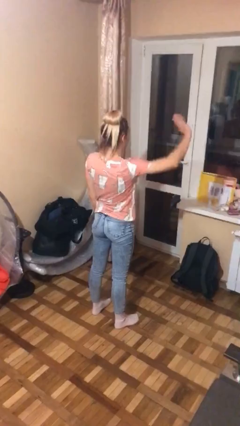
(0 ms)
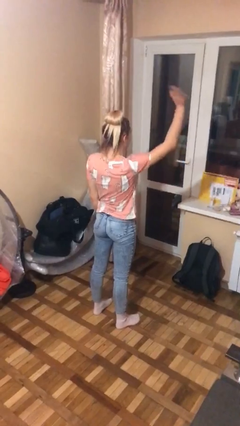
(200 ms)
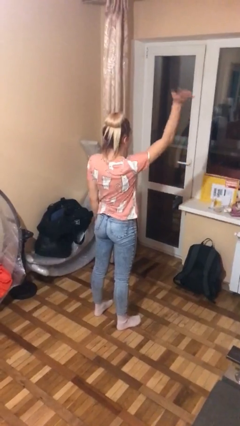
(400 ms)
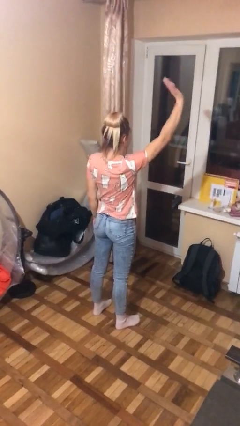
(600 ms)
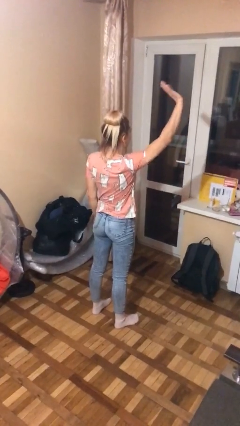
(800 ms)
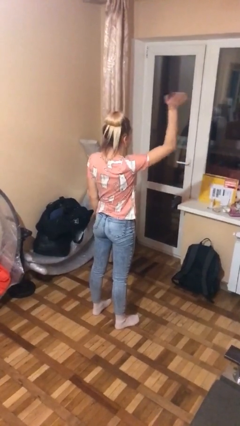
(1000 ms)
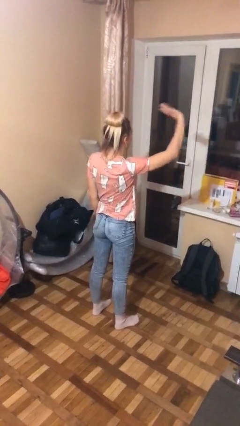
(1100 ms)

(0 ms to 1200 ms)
person salutes

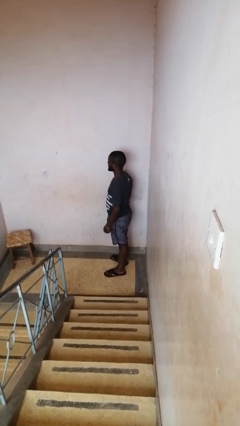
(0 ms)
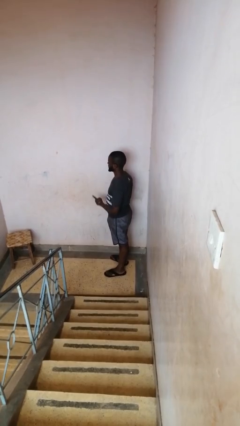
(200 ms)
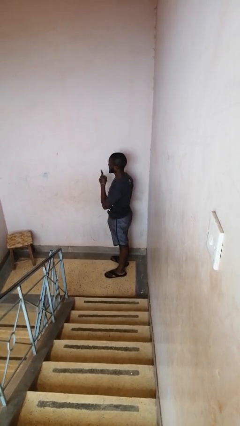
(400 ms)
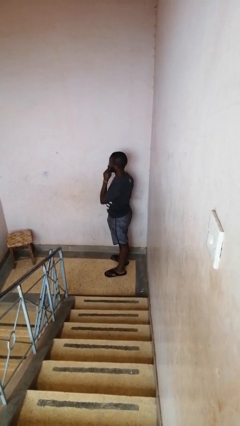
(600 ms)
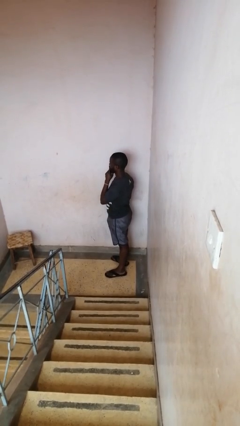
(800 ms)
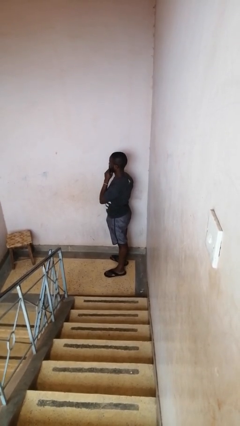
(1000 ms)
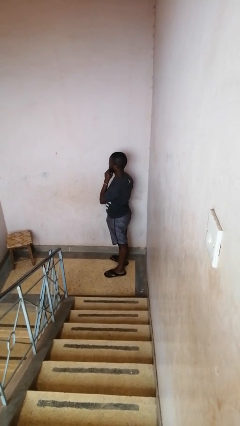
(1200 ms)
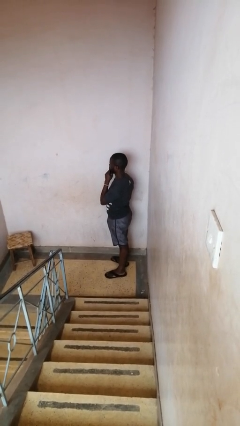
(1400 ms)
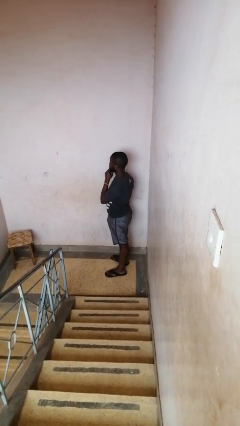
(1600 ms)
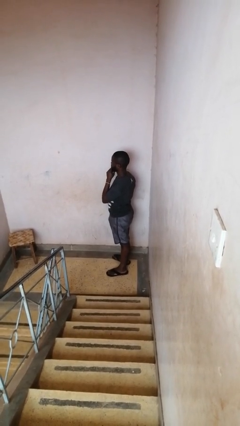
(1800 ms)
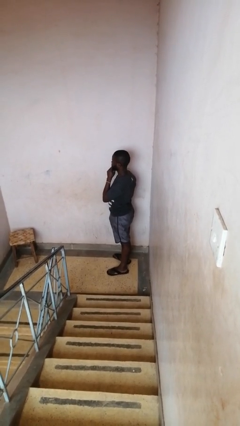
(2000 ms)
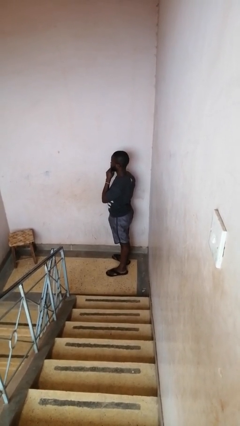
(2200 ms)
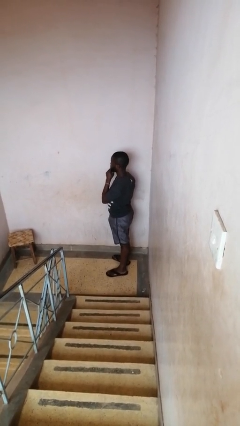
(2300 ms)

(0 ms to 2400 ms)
person gestures be quiet

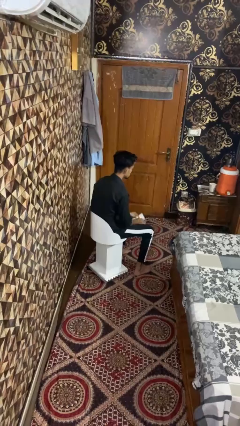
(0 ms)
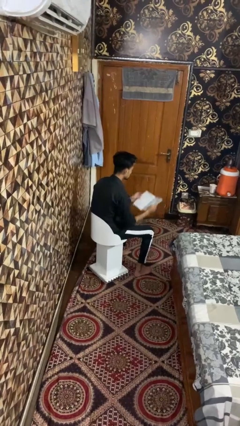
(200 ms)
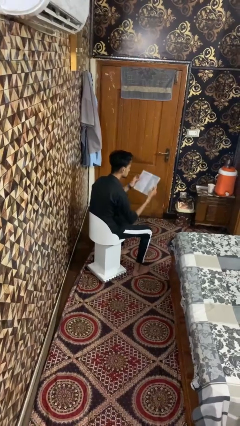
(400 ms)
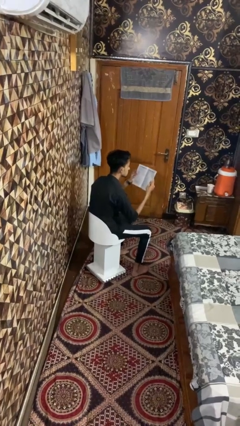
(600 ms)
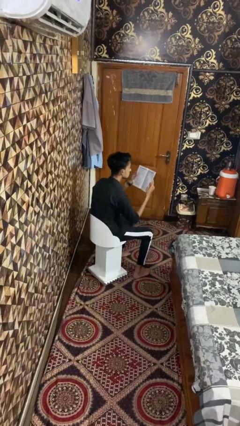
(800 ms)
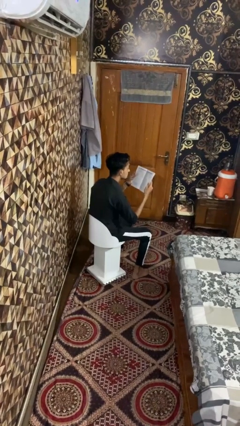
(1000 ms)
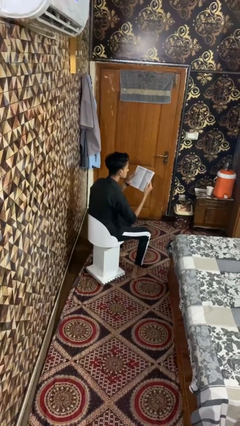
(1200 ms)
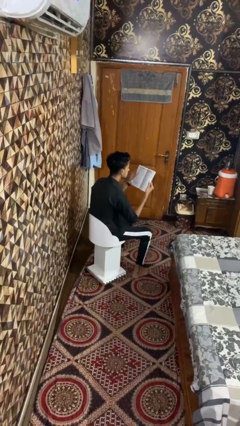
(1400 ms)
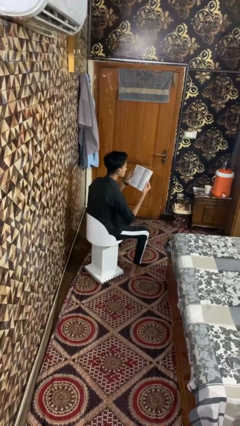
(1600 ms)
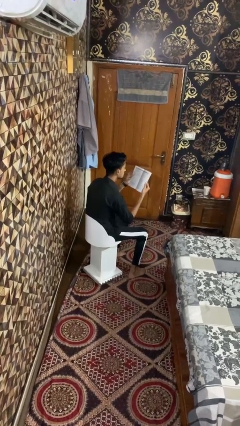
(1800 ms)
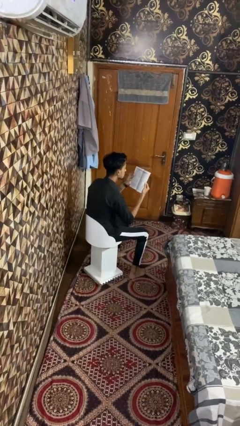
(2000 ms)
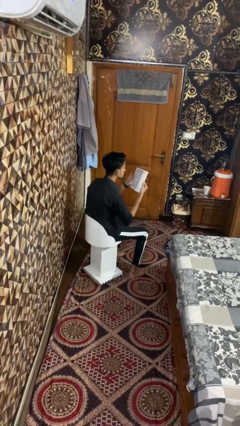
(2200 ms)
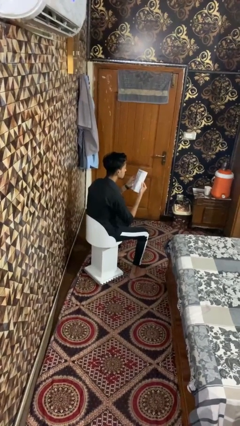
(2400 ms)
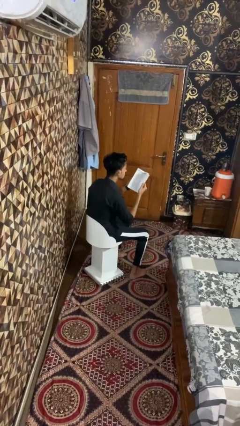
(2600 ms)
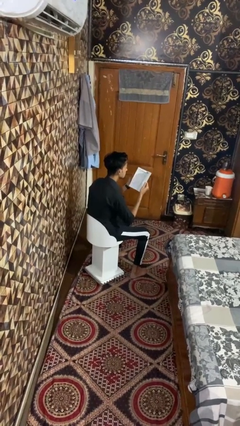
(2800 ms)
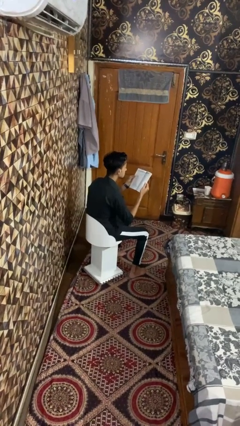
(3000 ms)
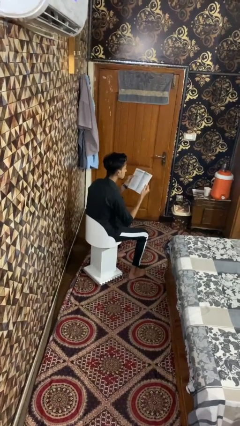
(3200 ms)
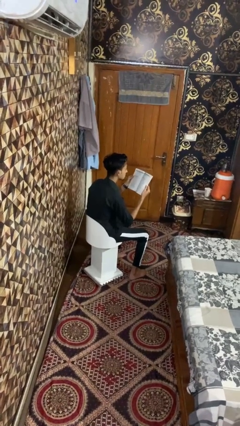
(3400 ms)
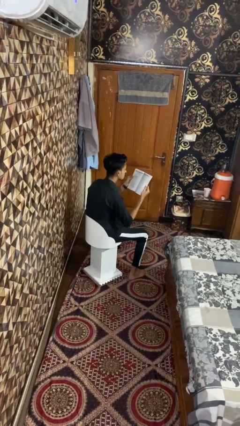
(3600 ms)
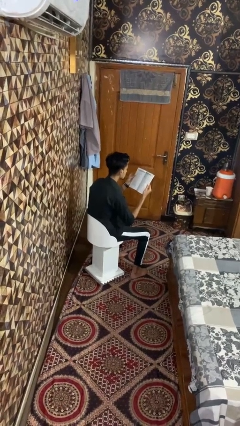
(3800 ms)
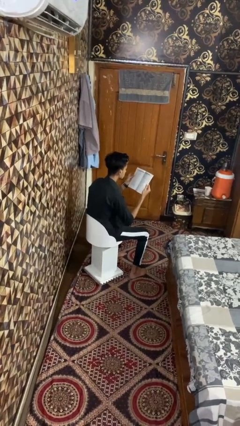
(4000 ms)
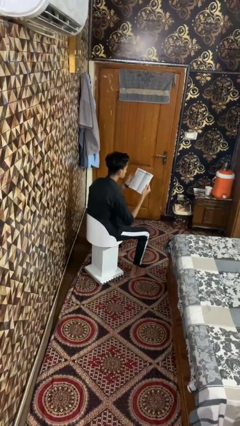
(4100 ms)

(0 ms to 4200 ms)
person reads book

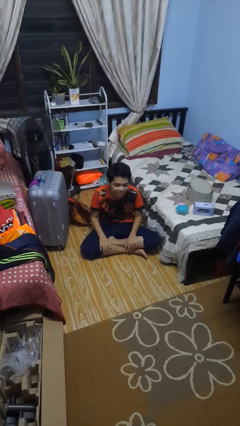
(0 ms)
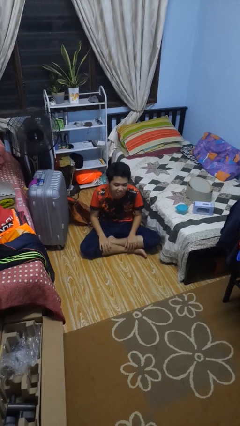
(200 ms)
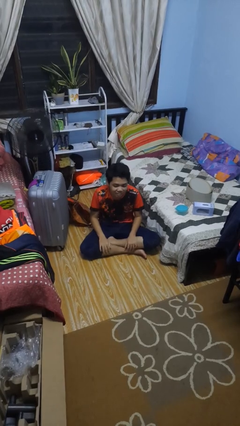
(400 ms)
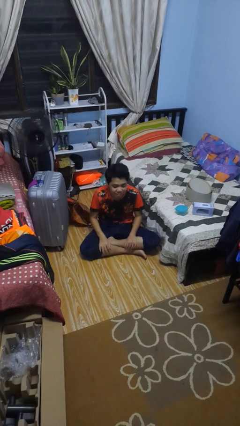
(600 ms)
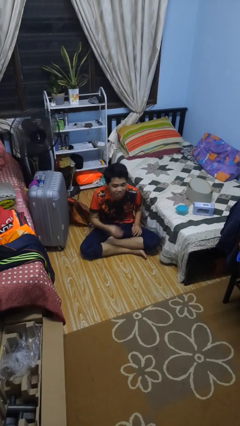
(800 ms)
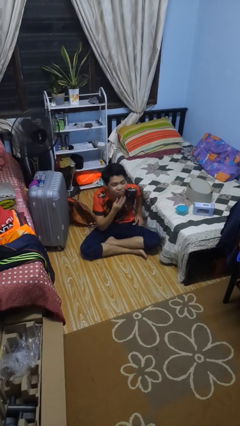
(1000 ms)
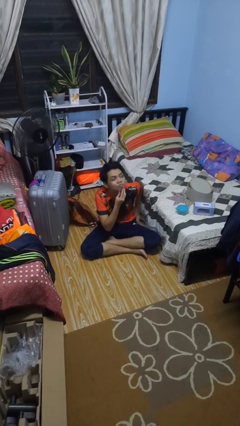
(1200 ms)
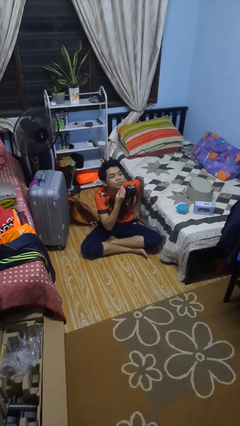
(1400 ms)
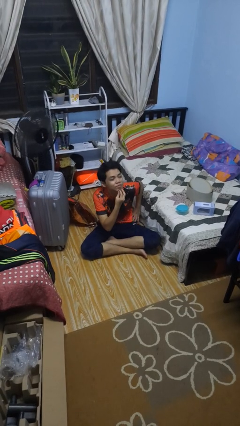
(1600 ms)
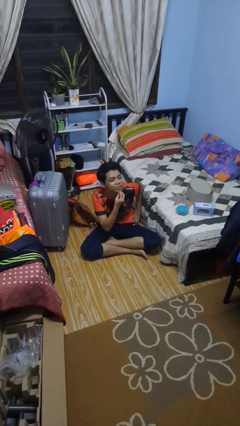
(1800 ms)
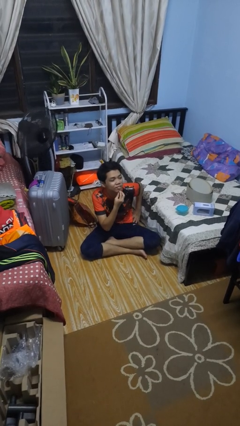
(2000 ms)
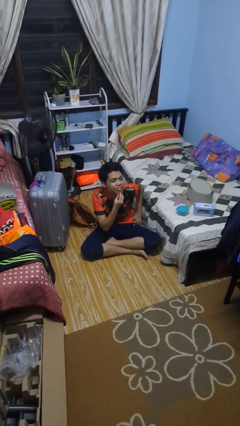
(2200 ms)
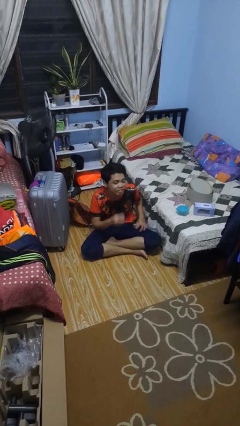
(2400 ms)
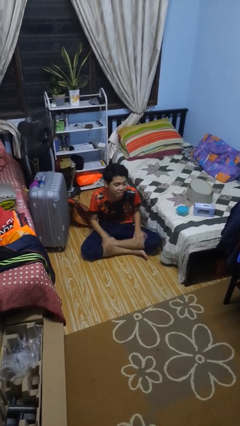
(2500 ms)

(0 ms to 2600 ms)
person strokes chin

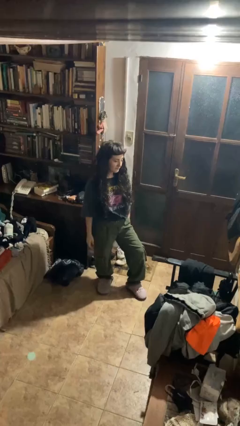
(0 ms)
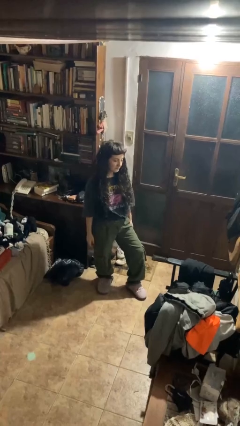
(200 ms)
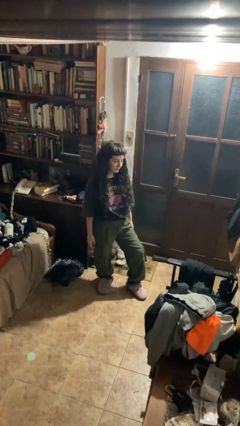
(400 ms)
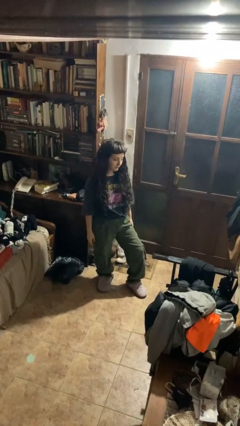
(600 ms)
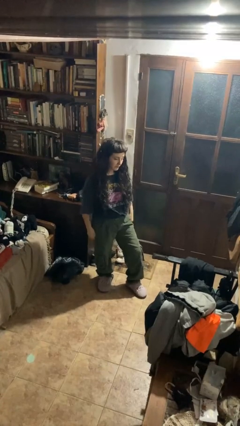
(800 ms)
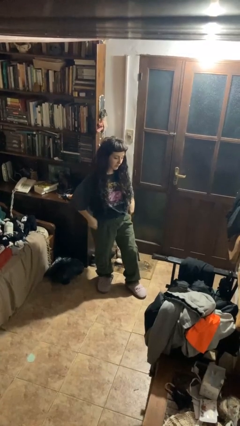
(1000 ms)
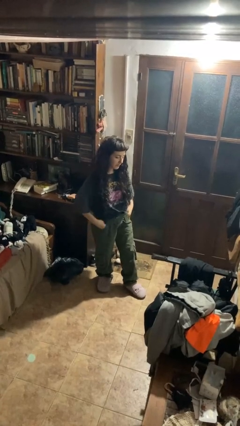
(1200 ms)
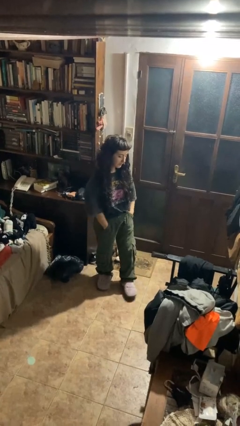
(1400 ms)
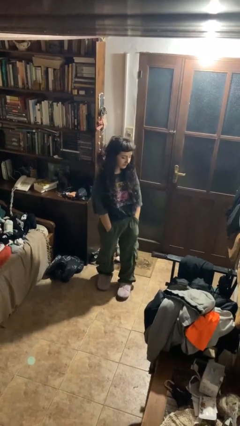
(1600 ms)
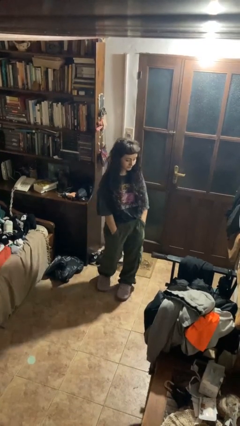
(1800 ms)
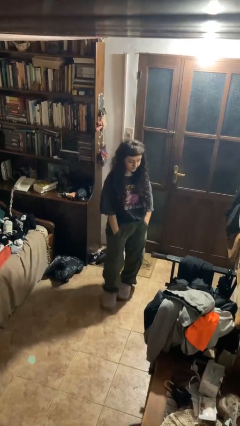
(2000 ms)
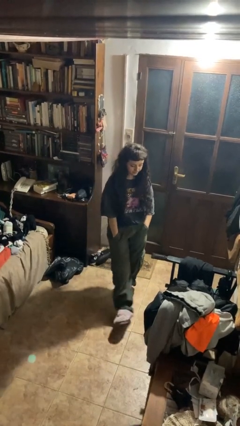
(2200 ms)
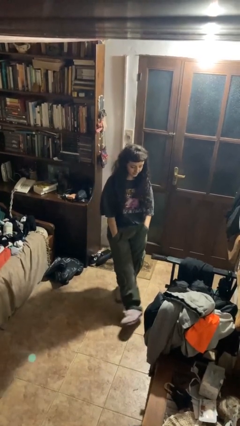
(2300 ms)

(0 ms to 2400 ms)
person puts hands in back pockets

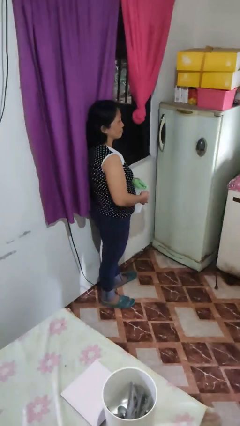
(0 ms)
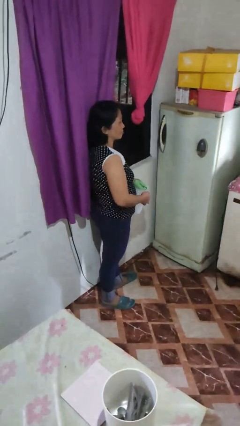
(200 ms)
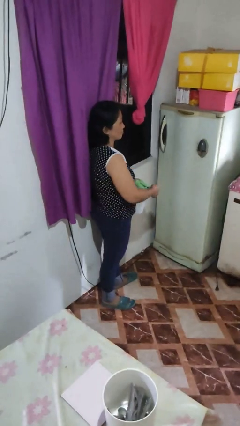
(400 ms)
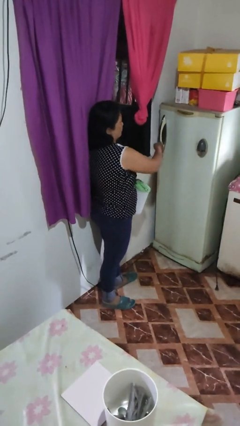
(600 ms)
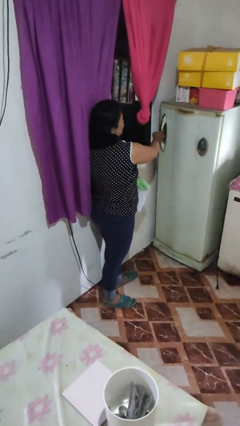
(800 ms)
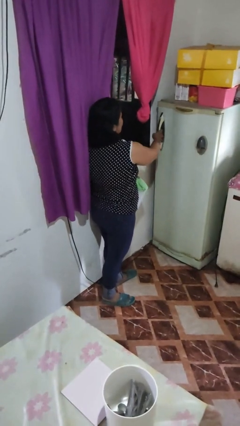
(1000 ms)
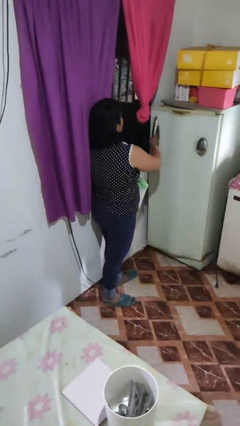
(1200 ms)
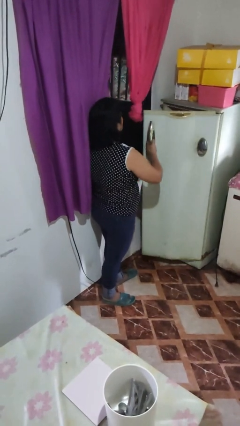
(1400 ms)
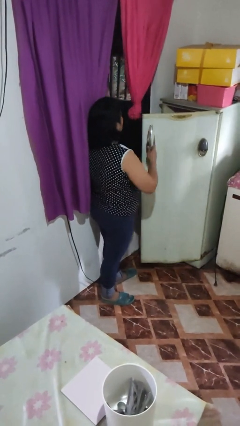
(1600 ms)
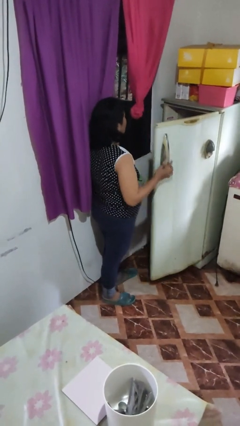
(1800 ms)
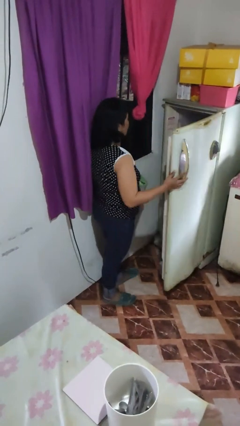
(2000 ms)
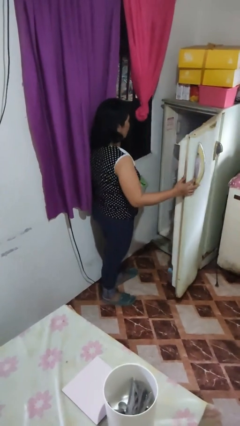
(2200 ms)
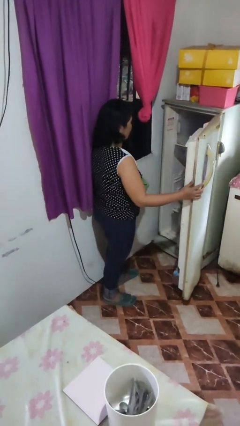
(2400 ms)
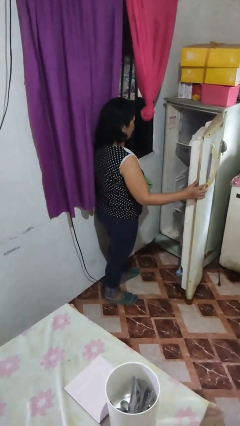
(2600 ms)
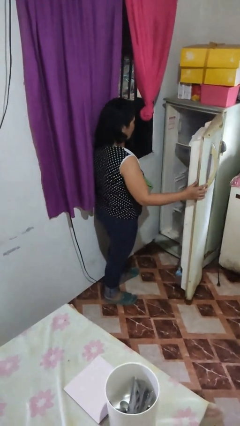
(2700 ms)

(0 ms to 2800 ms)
person opens refrigerator

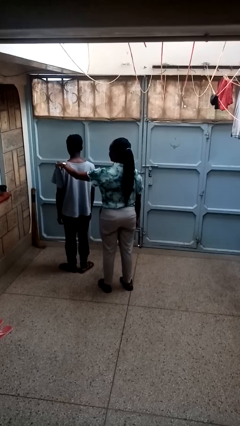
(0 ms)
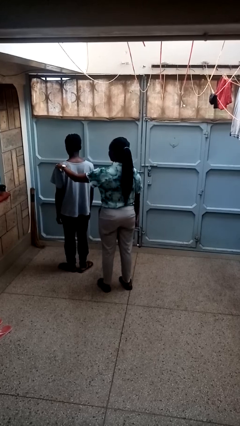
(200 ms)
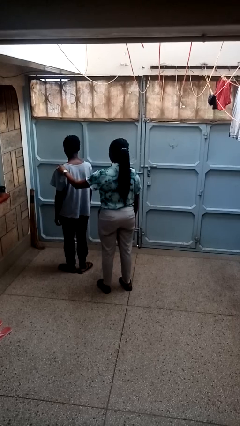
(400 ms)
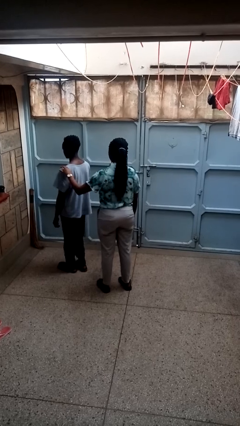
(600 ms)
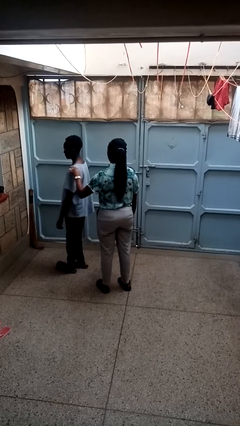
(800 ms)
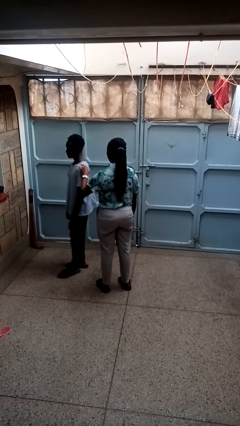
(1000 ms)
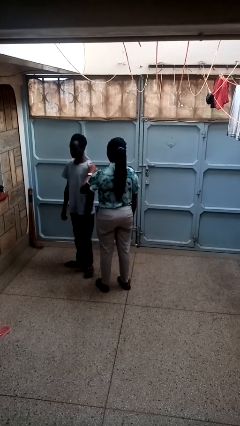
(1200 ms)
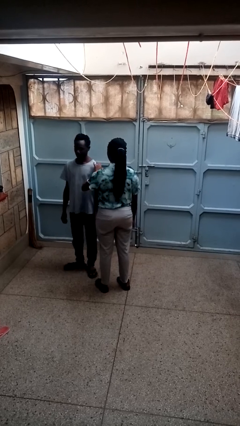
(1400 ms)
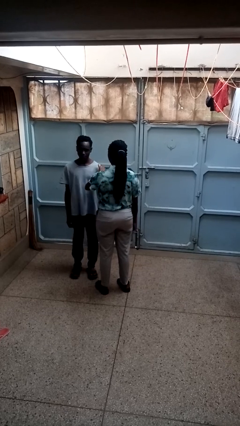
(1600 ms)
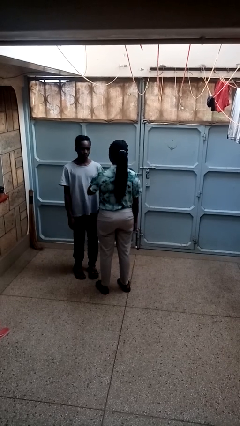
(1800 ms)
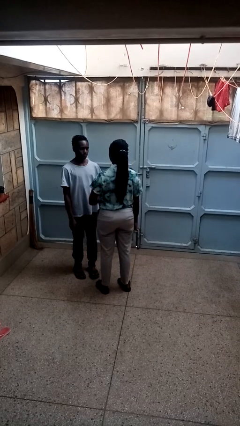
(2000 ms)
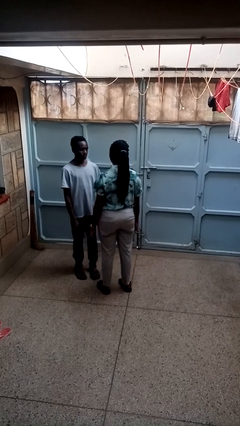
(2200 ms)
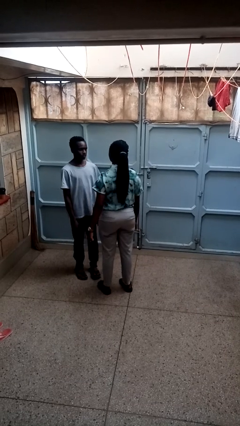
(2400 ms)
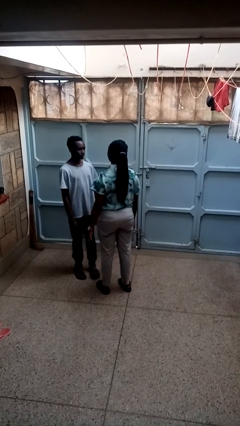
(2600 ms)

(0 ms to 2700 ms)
person spins person around
